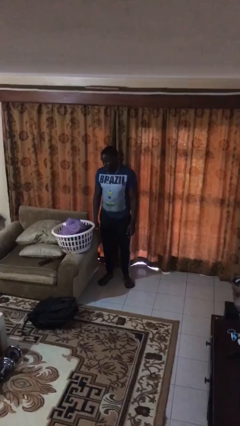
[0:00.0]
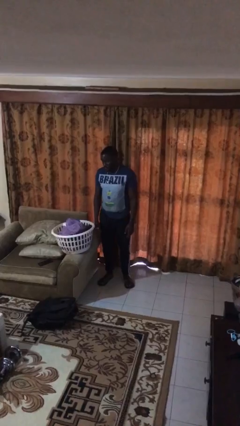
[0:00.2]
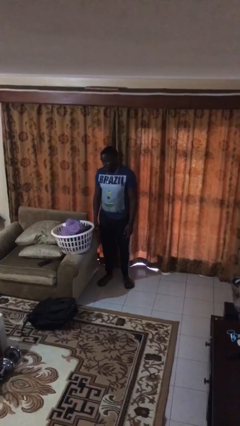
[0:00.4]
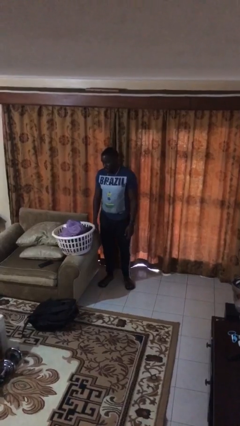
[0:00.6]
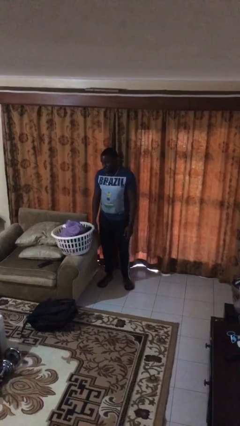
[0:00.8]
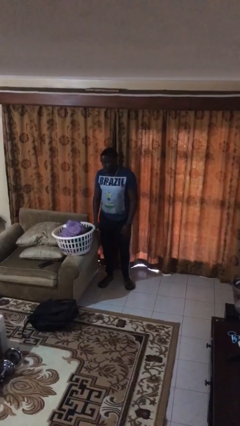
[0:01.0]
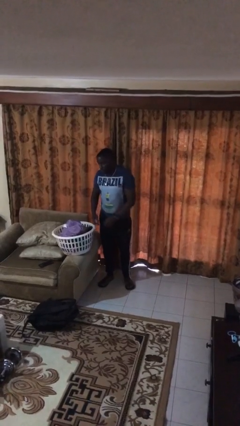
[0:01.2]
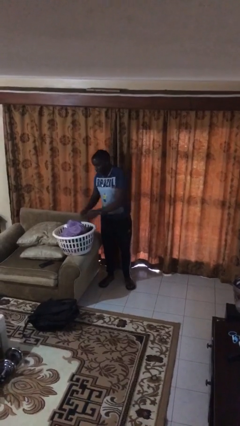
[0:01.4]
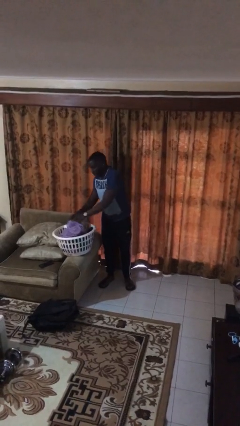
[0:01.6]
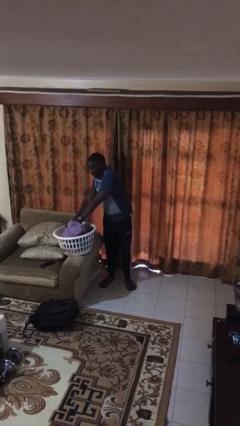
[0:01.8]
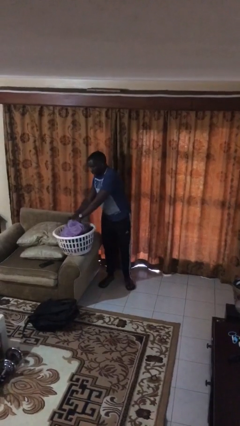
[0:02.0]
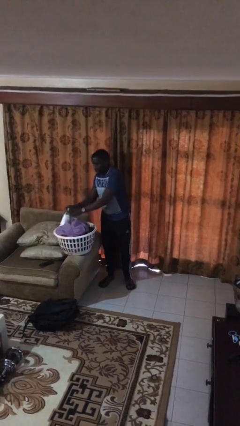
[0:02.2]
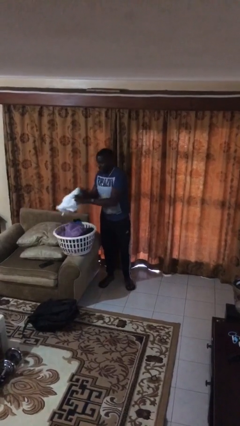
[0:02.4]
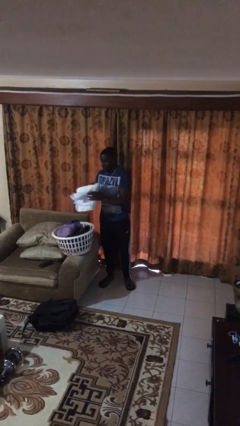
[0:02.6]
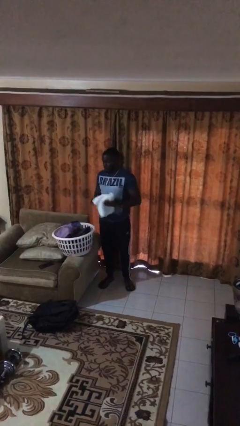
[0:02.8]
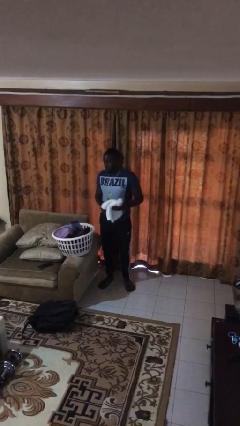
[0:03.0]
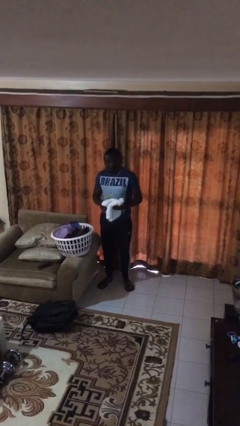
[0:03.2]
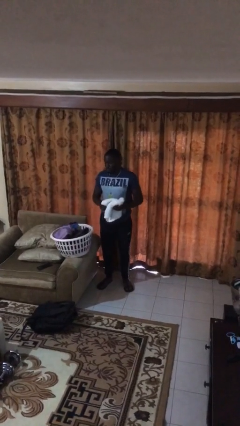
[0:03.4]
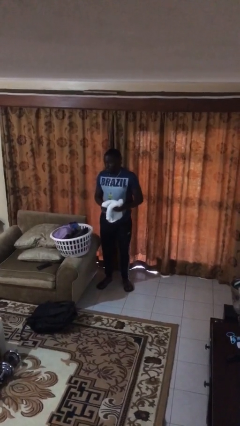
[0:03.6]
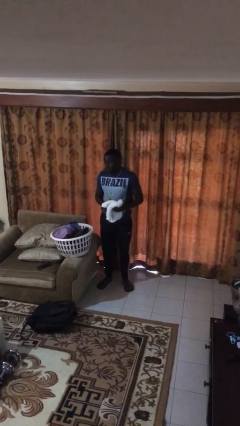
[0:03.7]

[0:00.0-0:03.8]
person takes object from basket

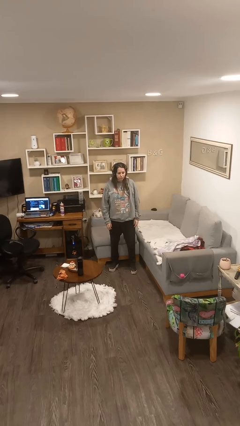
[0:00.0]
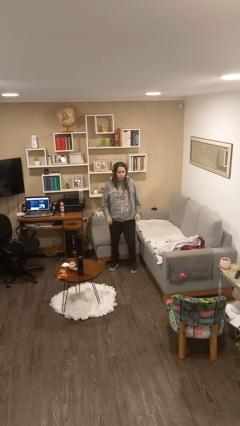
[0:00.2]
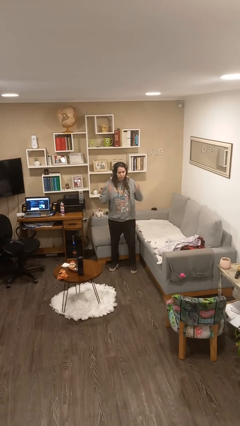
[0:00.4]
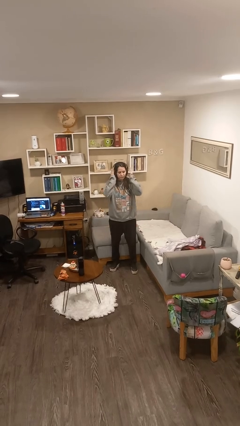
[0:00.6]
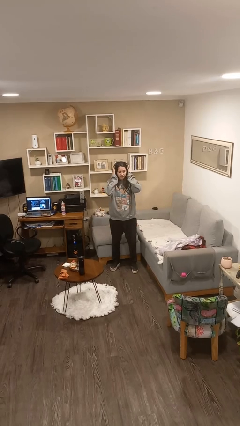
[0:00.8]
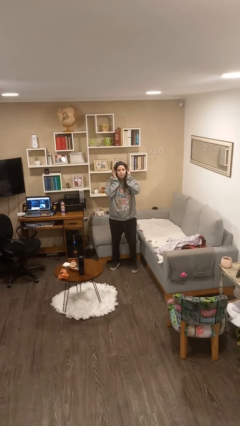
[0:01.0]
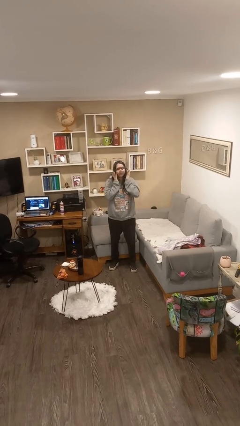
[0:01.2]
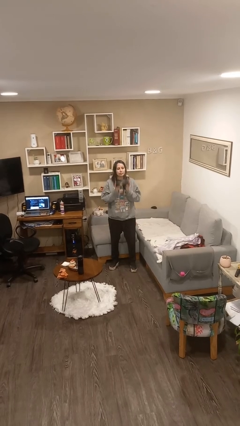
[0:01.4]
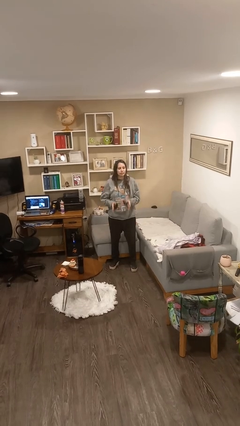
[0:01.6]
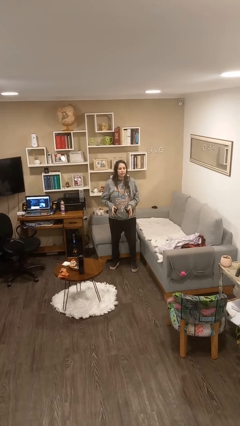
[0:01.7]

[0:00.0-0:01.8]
person takes off headphones

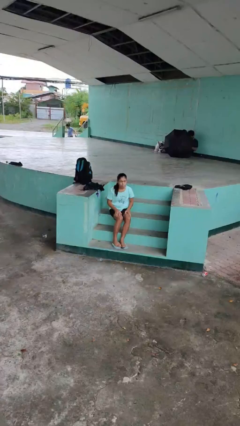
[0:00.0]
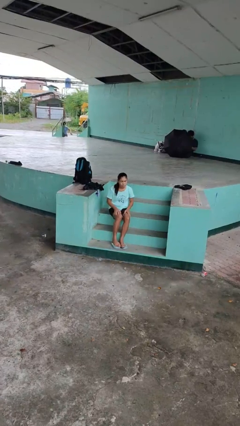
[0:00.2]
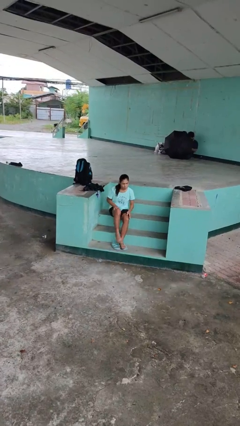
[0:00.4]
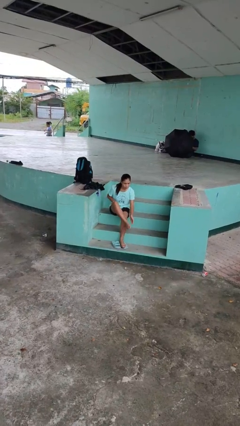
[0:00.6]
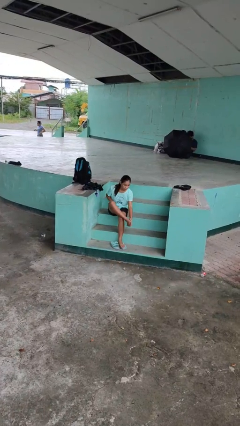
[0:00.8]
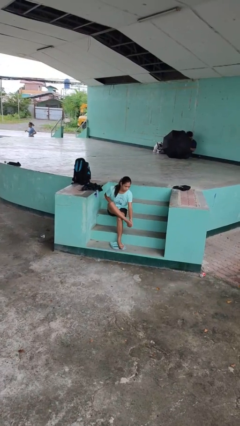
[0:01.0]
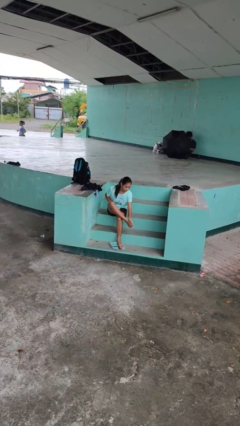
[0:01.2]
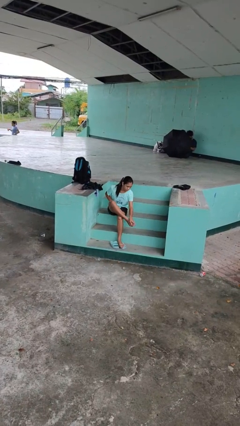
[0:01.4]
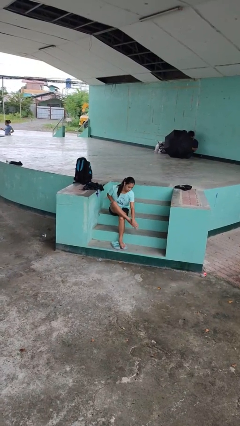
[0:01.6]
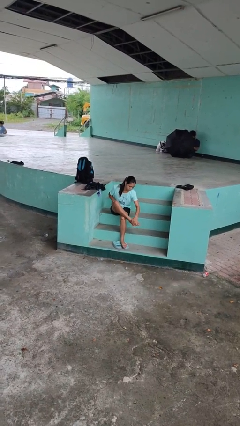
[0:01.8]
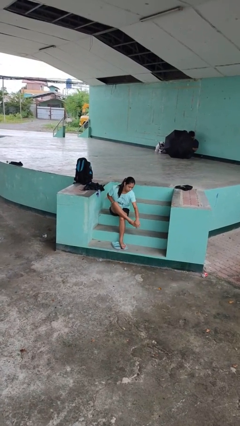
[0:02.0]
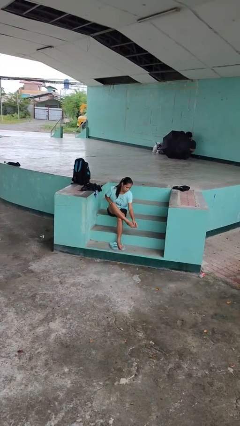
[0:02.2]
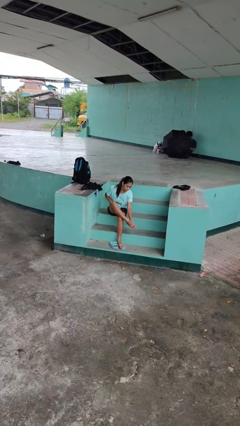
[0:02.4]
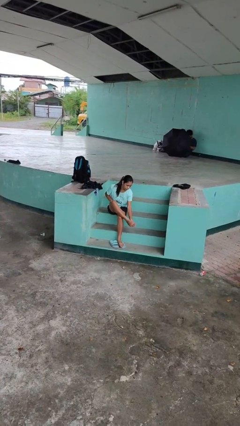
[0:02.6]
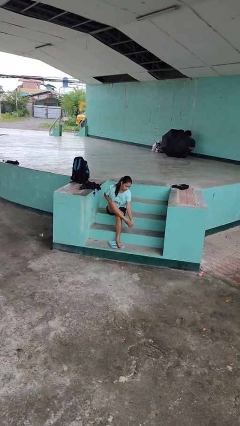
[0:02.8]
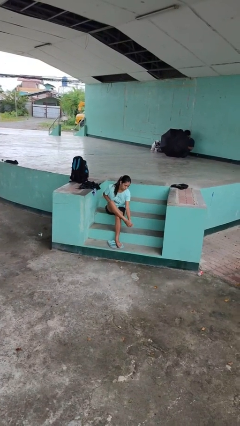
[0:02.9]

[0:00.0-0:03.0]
person rubs foot

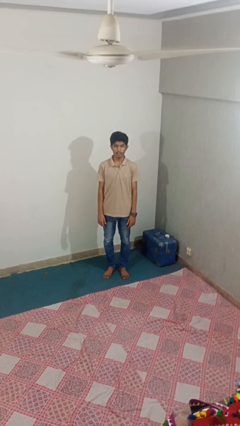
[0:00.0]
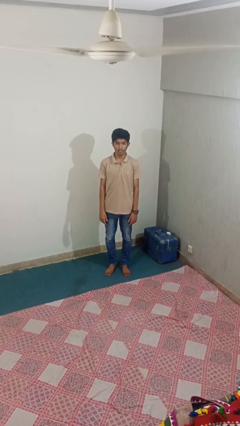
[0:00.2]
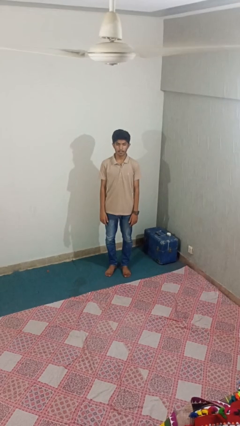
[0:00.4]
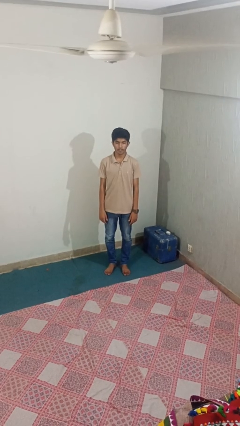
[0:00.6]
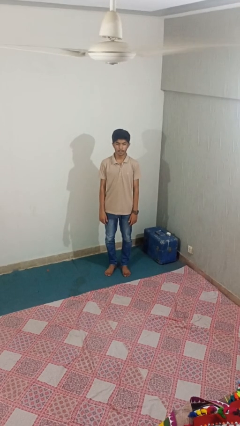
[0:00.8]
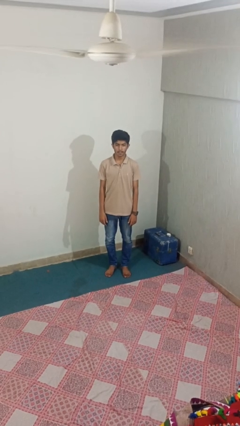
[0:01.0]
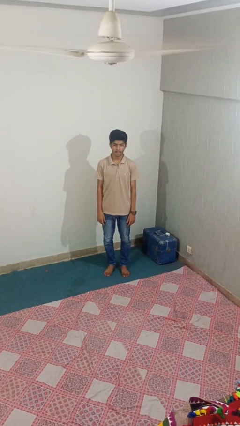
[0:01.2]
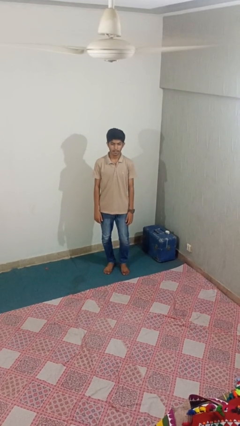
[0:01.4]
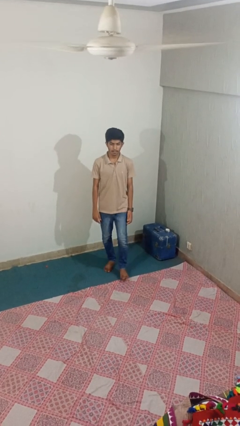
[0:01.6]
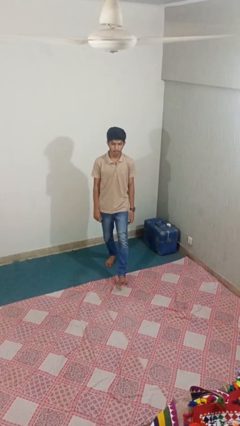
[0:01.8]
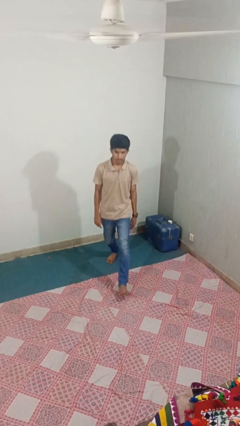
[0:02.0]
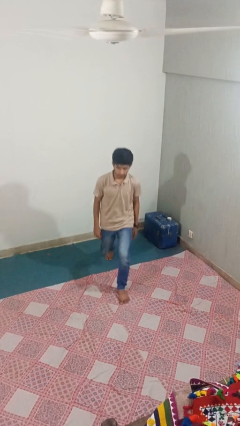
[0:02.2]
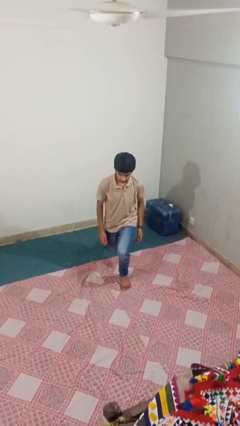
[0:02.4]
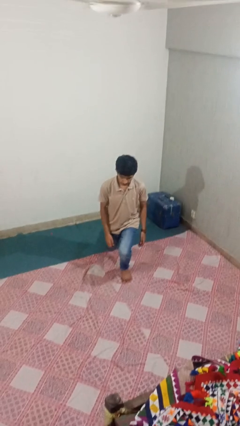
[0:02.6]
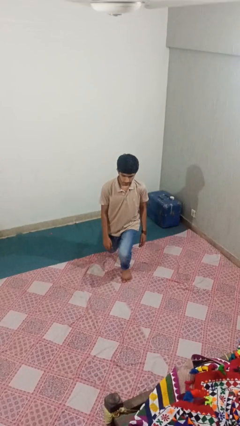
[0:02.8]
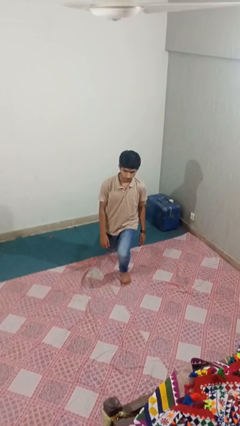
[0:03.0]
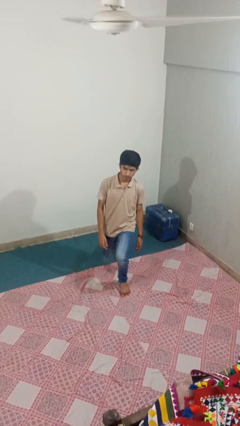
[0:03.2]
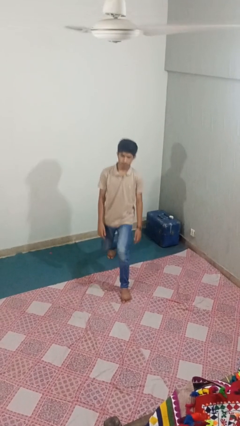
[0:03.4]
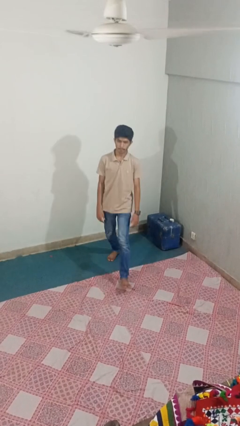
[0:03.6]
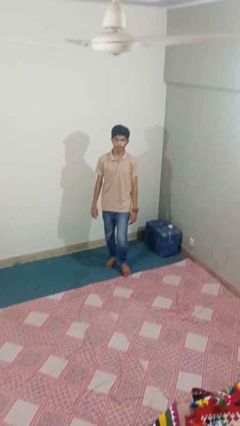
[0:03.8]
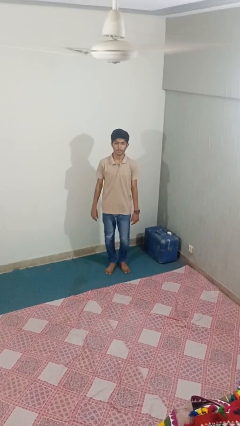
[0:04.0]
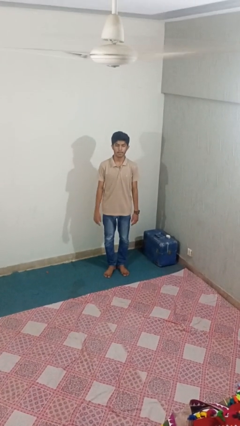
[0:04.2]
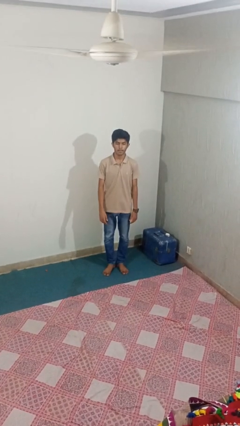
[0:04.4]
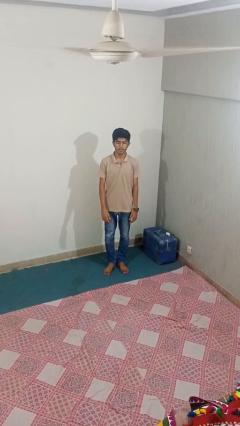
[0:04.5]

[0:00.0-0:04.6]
person exercises with lunges

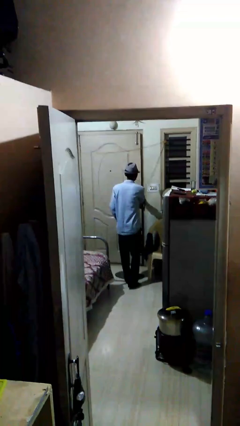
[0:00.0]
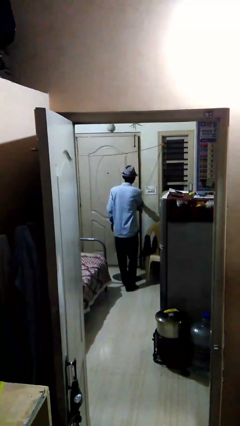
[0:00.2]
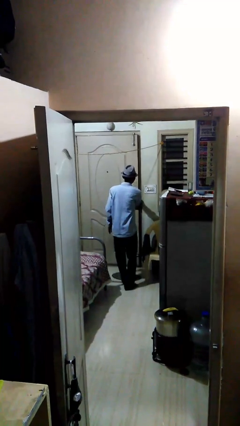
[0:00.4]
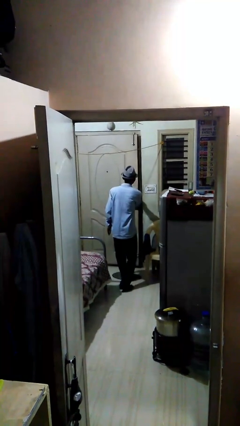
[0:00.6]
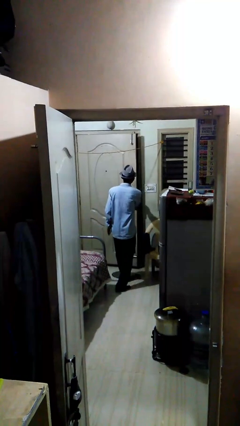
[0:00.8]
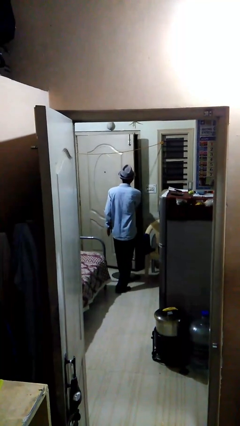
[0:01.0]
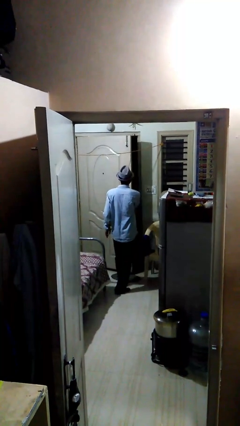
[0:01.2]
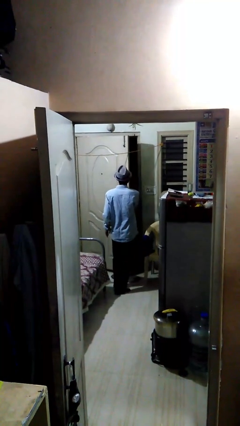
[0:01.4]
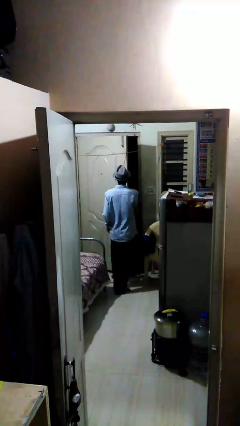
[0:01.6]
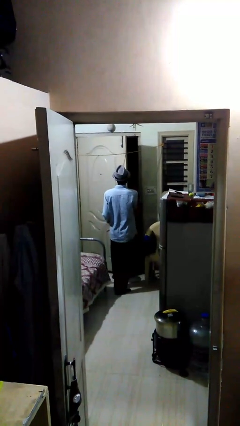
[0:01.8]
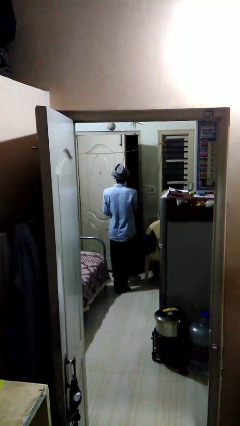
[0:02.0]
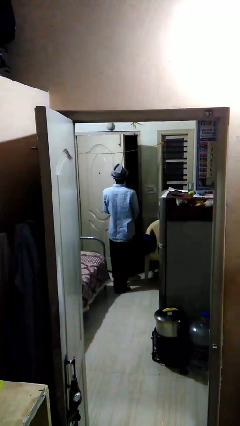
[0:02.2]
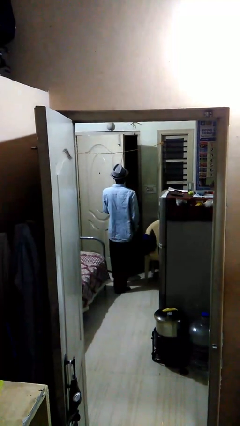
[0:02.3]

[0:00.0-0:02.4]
person opens facility door

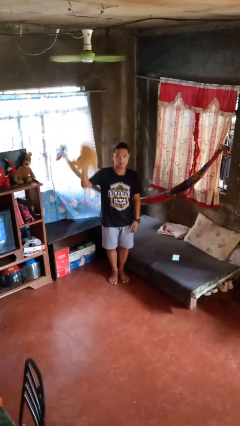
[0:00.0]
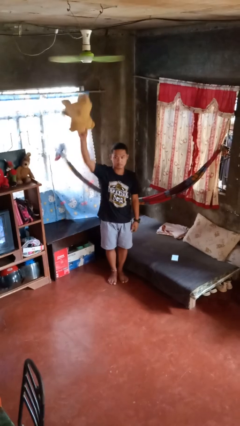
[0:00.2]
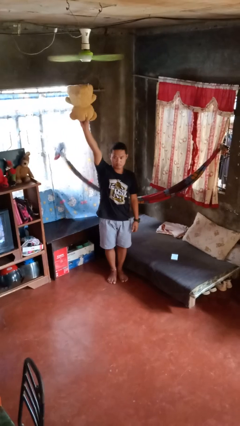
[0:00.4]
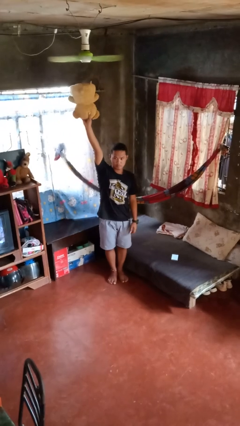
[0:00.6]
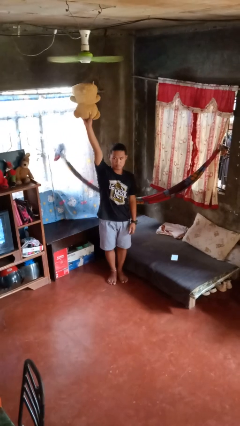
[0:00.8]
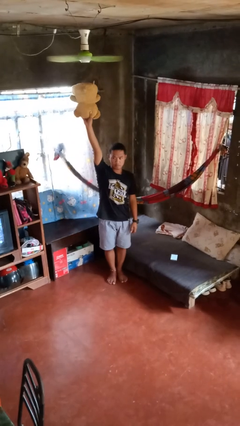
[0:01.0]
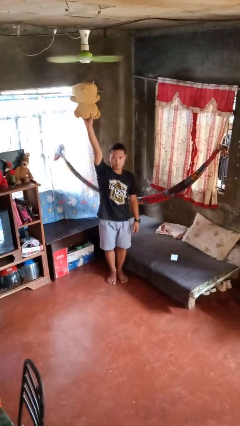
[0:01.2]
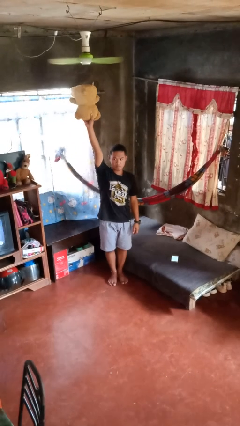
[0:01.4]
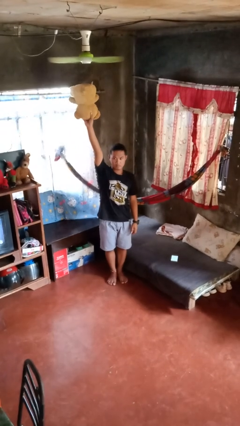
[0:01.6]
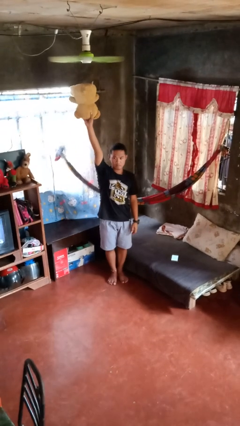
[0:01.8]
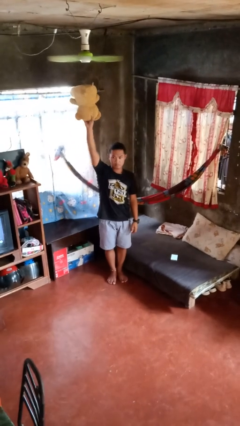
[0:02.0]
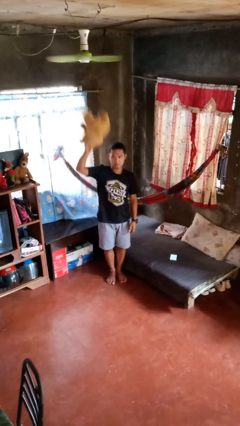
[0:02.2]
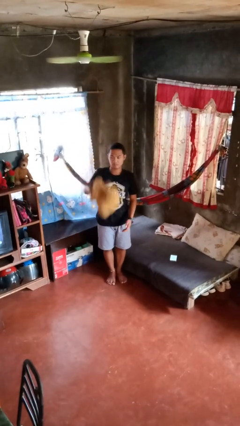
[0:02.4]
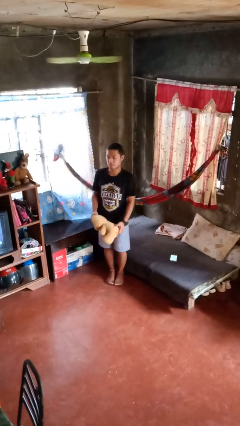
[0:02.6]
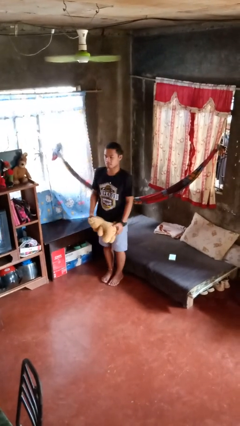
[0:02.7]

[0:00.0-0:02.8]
person holds object above head
